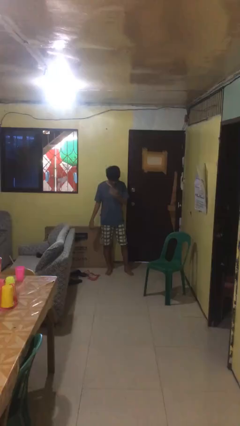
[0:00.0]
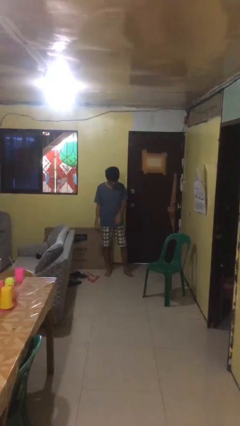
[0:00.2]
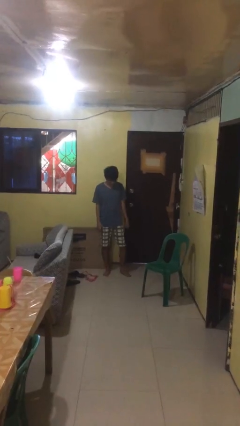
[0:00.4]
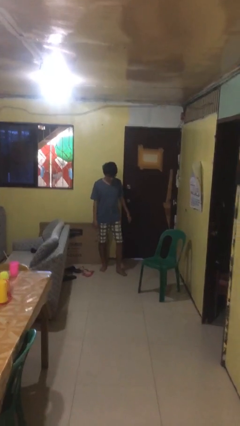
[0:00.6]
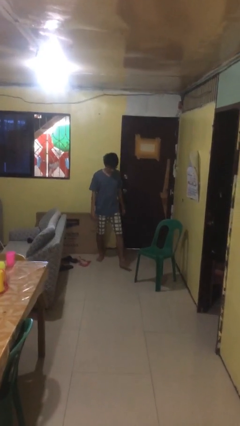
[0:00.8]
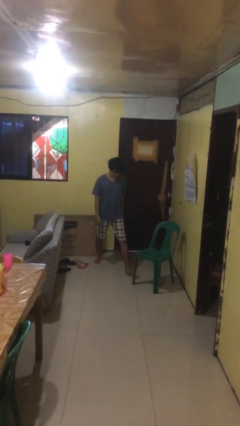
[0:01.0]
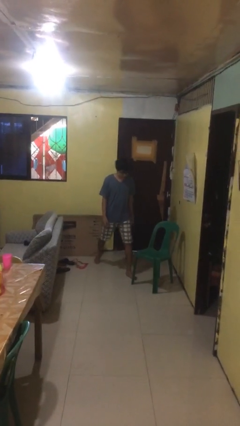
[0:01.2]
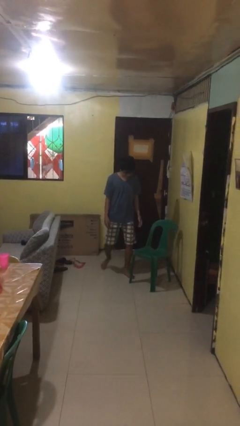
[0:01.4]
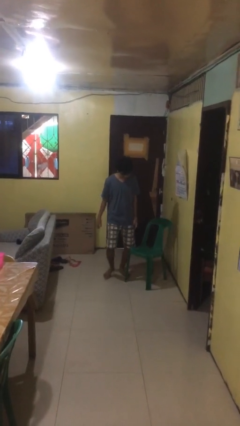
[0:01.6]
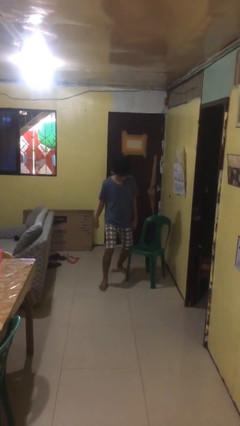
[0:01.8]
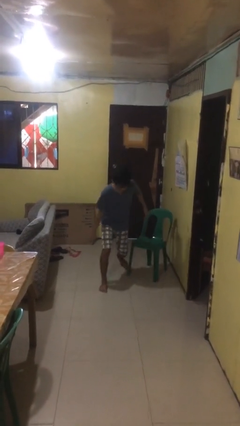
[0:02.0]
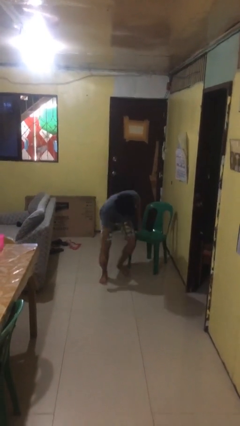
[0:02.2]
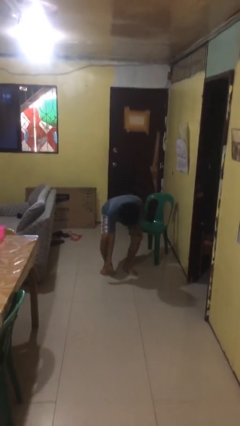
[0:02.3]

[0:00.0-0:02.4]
person trips on object on floor

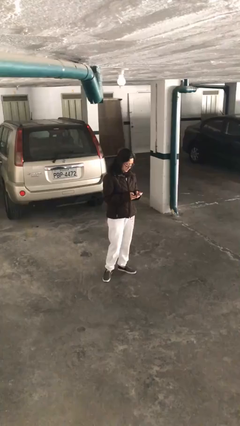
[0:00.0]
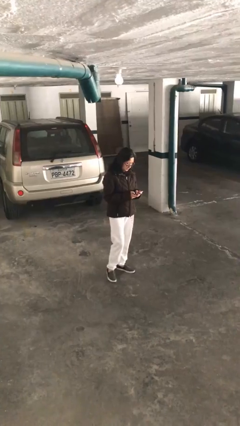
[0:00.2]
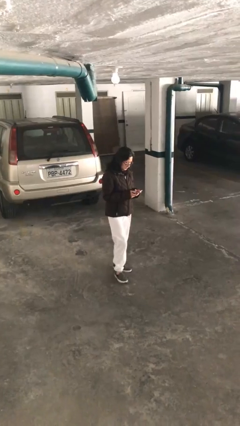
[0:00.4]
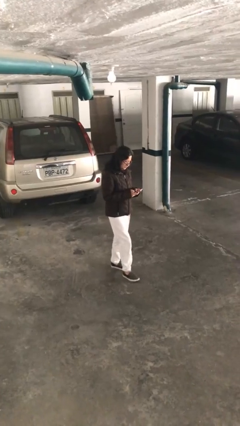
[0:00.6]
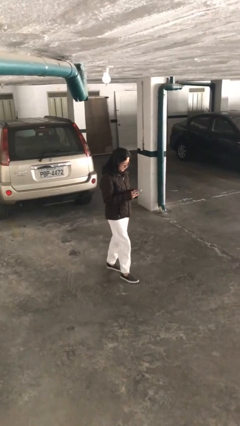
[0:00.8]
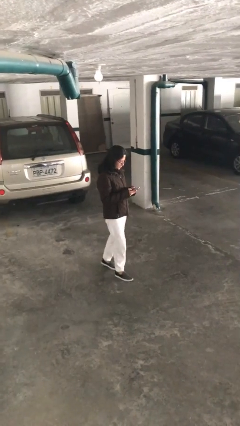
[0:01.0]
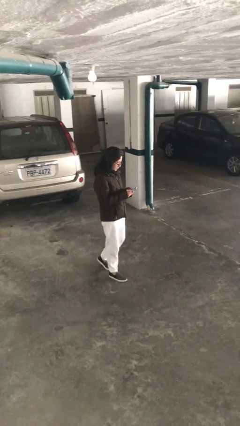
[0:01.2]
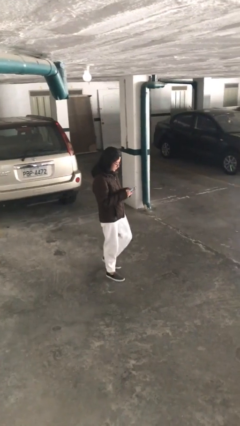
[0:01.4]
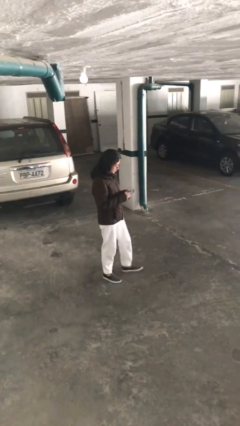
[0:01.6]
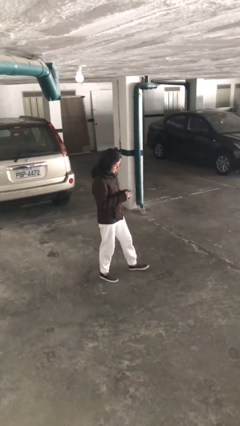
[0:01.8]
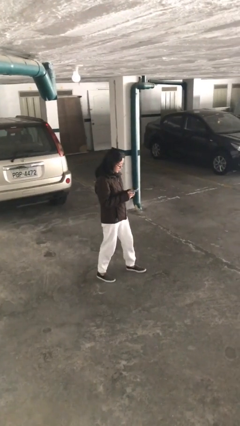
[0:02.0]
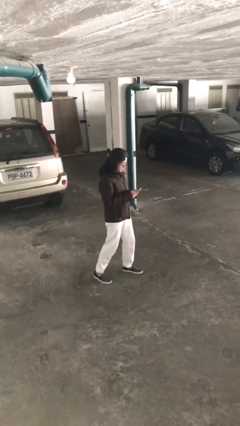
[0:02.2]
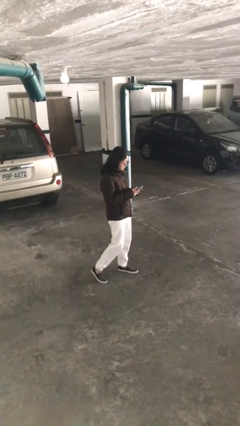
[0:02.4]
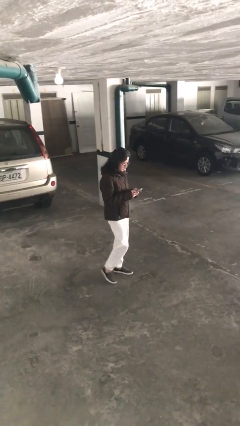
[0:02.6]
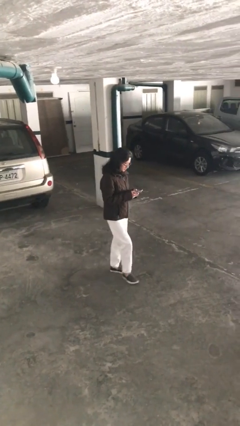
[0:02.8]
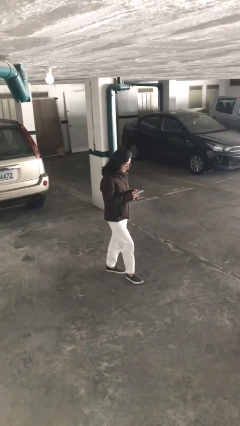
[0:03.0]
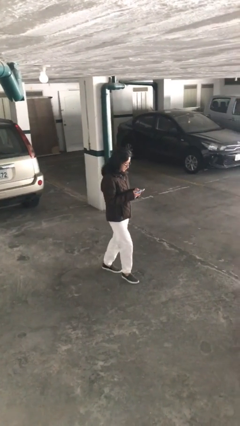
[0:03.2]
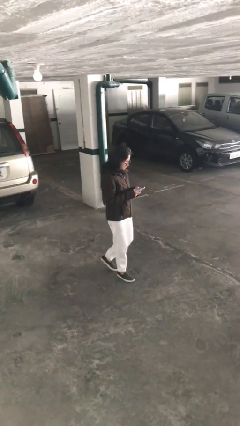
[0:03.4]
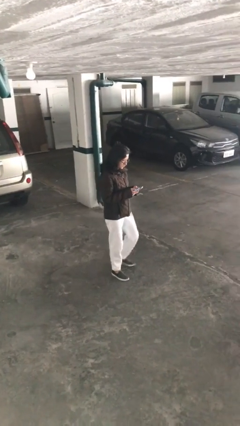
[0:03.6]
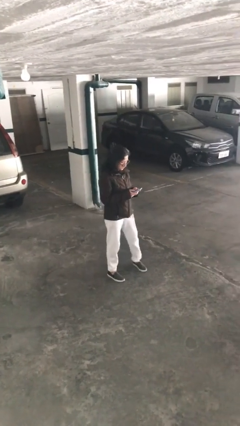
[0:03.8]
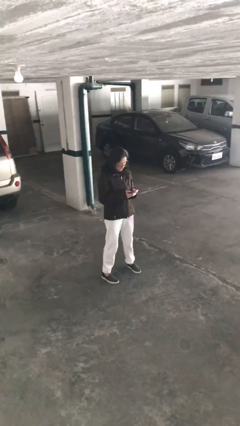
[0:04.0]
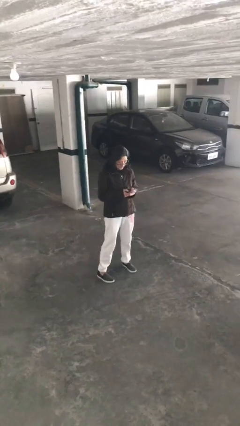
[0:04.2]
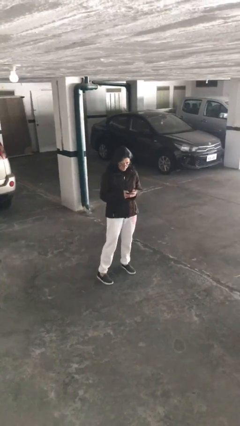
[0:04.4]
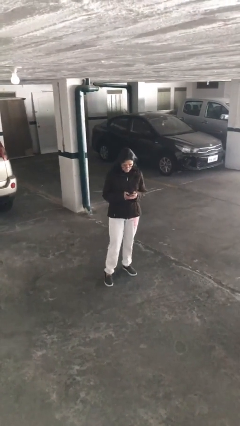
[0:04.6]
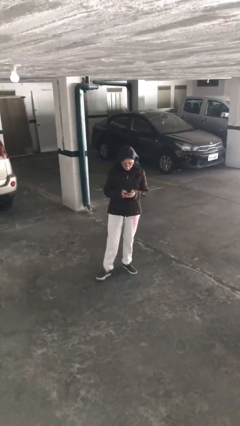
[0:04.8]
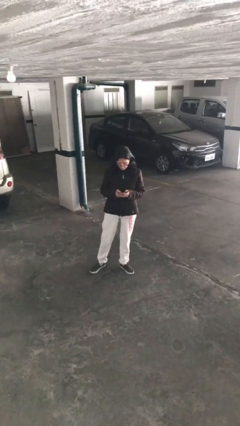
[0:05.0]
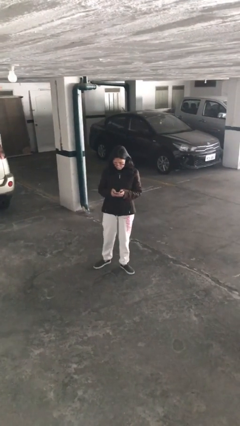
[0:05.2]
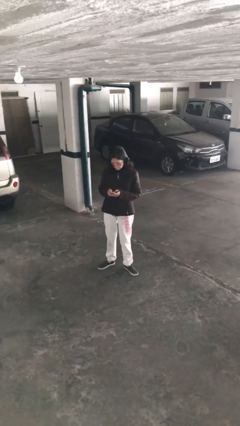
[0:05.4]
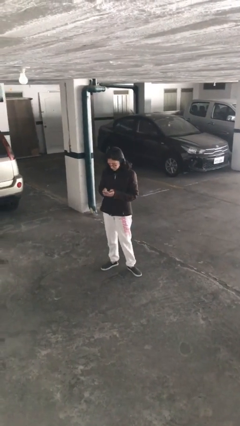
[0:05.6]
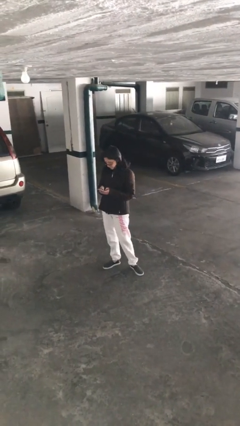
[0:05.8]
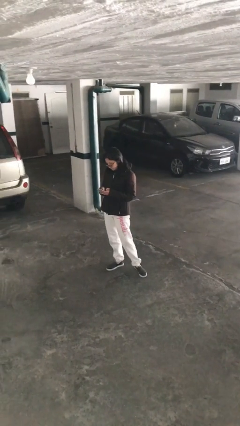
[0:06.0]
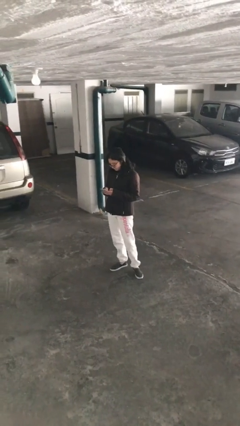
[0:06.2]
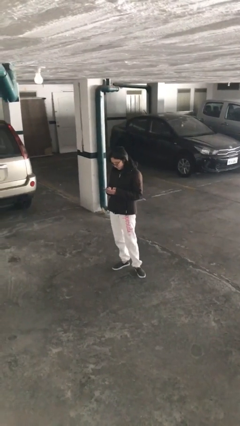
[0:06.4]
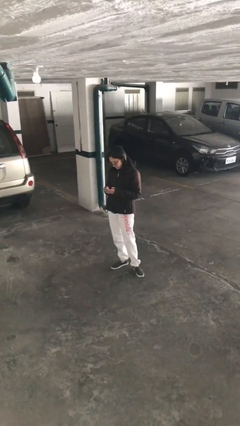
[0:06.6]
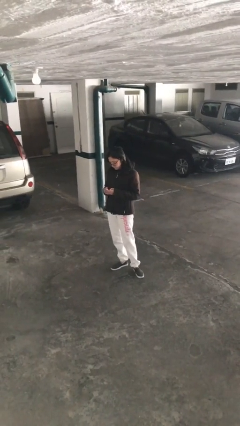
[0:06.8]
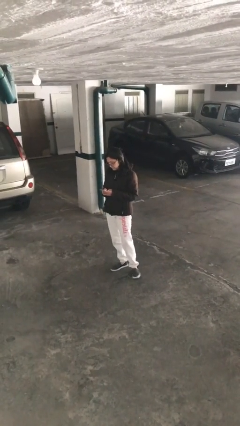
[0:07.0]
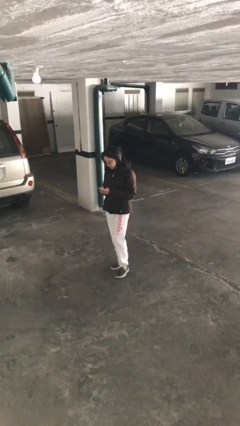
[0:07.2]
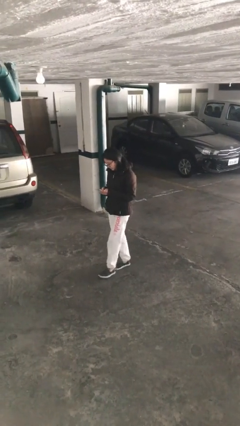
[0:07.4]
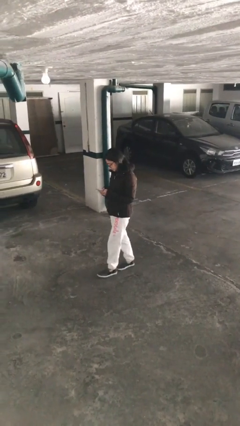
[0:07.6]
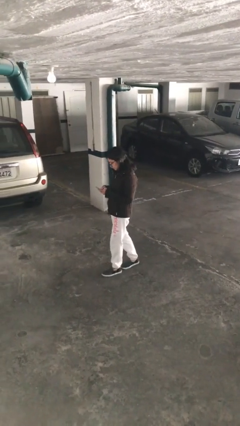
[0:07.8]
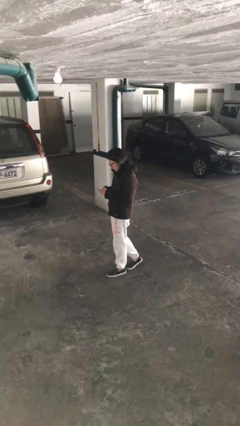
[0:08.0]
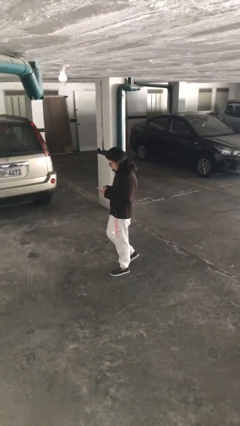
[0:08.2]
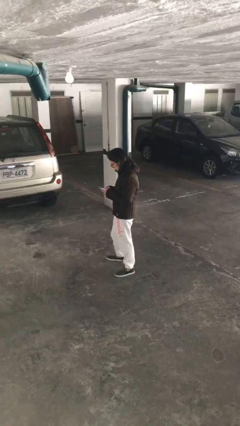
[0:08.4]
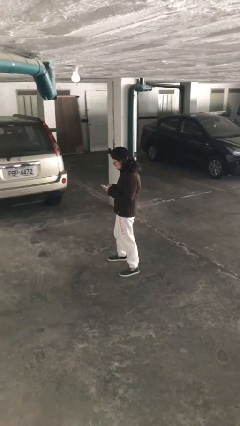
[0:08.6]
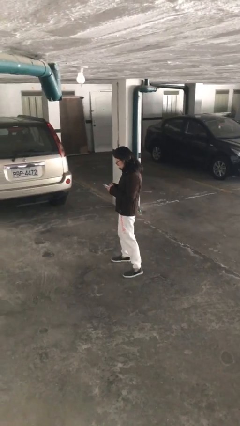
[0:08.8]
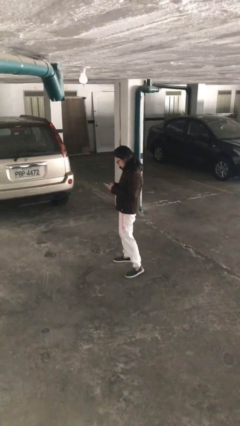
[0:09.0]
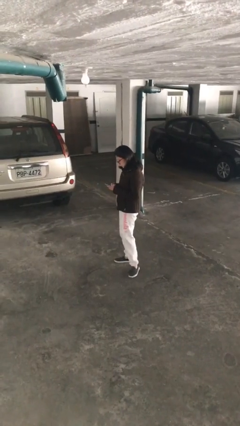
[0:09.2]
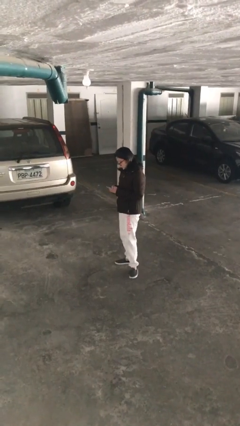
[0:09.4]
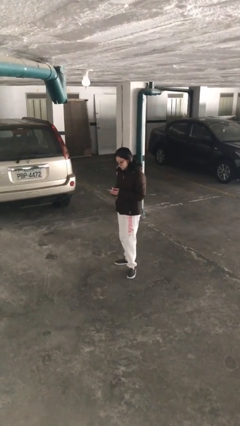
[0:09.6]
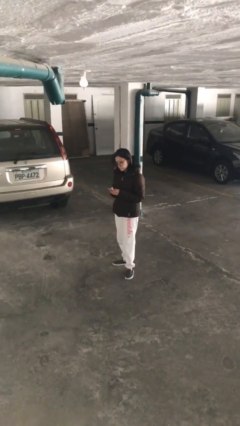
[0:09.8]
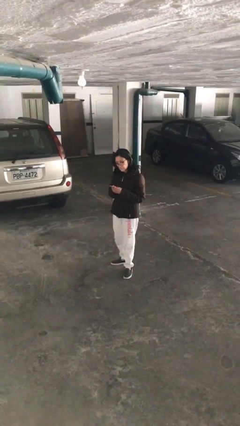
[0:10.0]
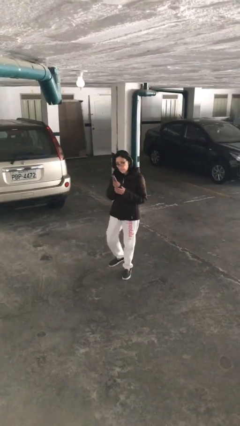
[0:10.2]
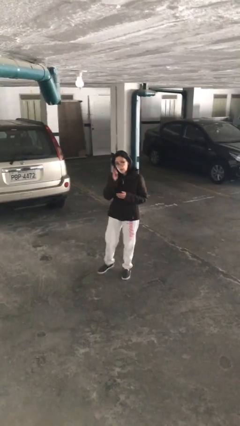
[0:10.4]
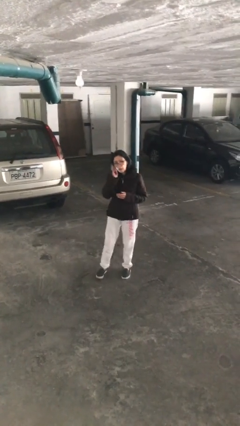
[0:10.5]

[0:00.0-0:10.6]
person texts on phone

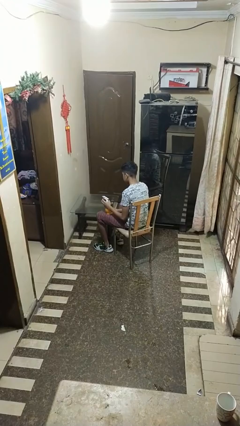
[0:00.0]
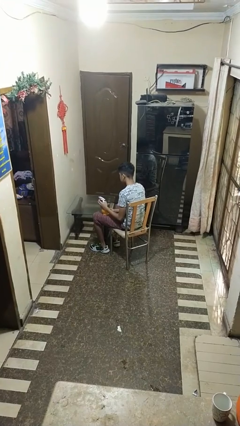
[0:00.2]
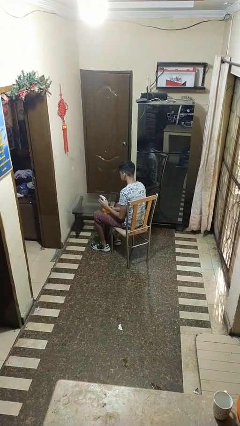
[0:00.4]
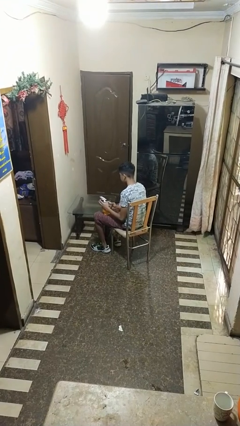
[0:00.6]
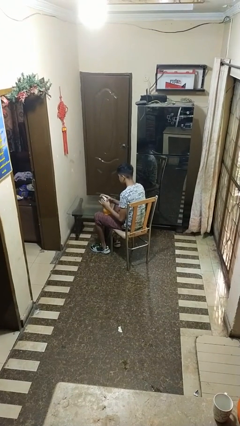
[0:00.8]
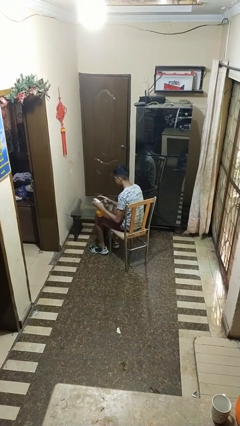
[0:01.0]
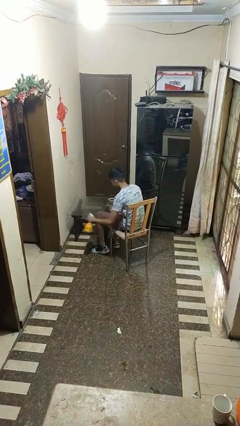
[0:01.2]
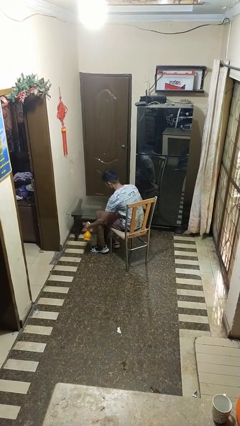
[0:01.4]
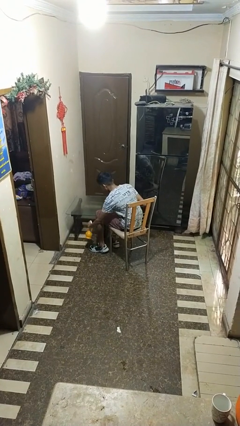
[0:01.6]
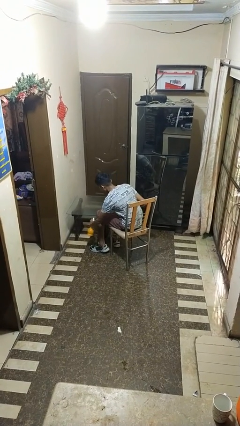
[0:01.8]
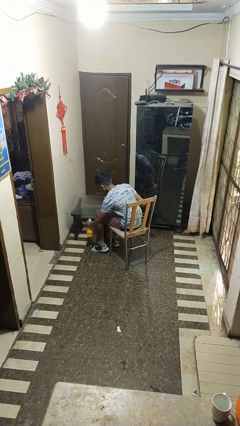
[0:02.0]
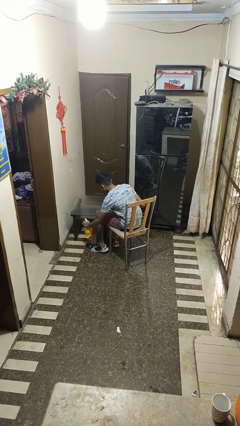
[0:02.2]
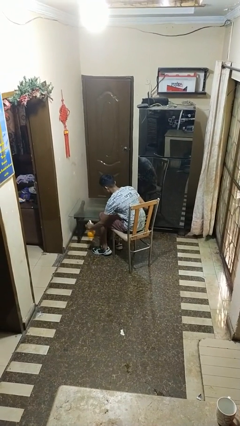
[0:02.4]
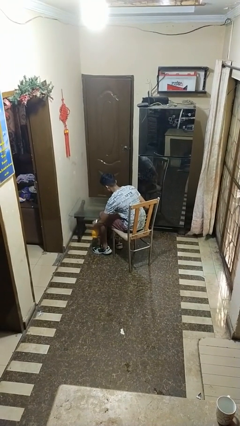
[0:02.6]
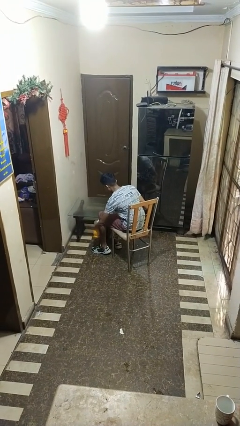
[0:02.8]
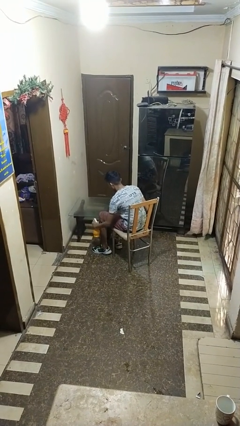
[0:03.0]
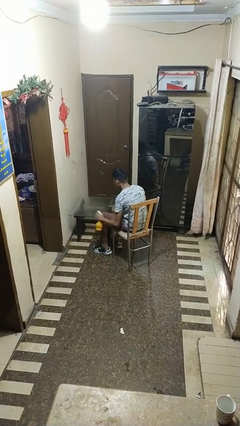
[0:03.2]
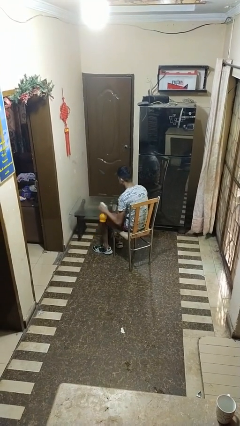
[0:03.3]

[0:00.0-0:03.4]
person sprays from bottle

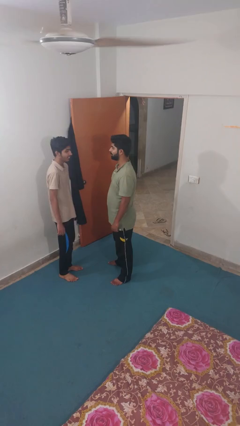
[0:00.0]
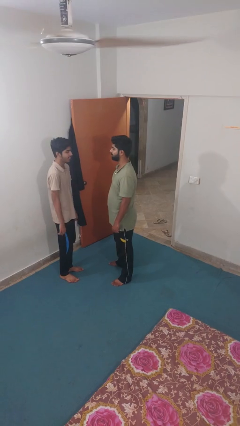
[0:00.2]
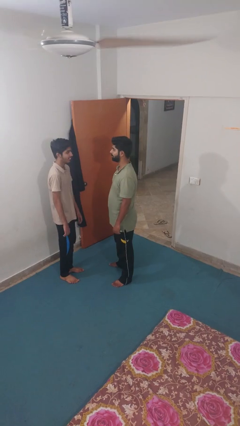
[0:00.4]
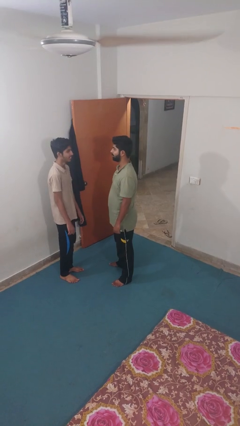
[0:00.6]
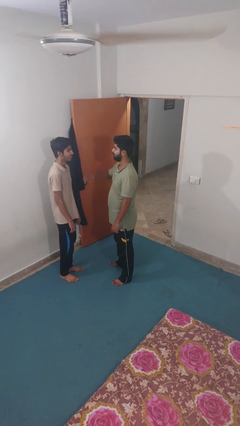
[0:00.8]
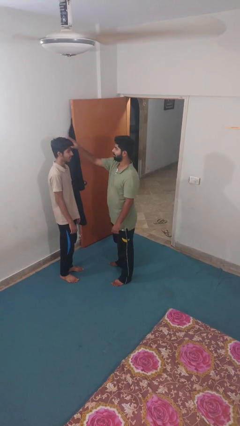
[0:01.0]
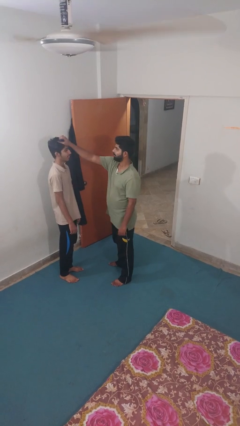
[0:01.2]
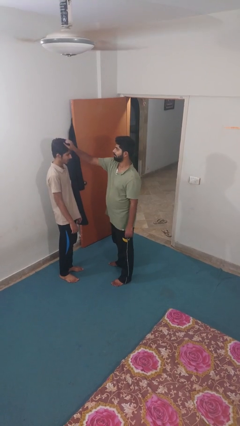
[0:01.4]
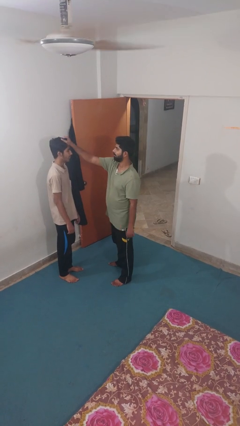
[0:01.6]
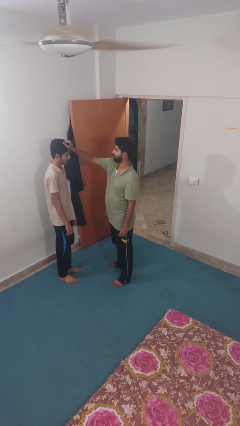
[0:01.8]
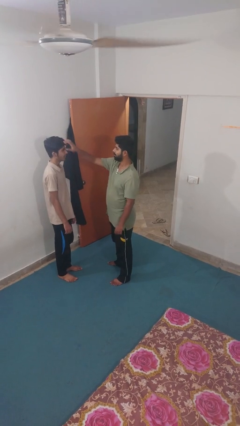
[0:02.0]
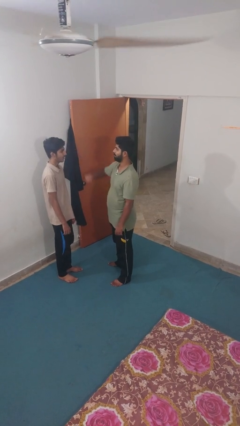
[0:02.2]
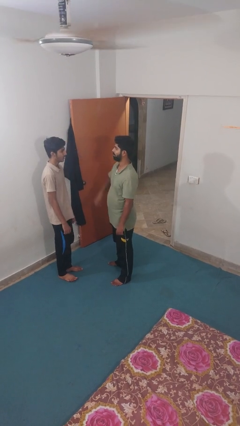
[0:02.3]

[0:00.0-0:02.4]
person grabs person by hair
